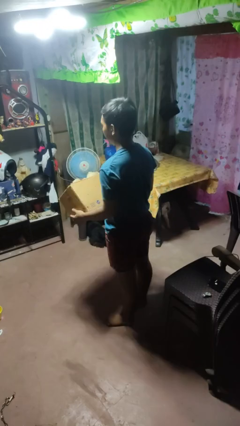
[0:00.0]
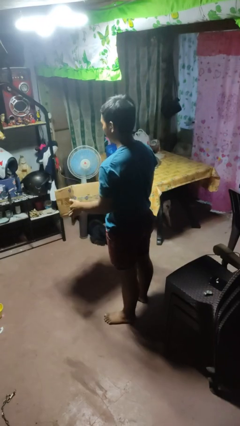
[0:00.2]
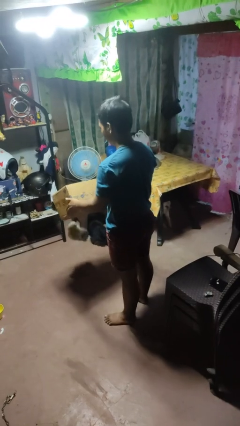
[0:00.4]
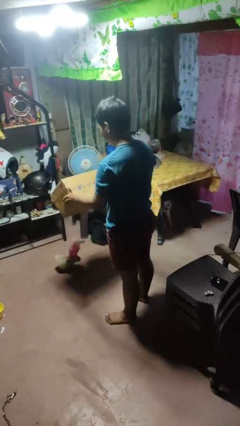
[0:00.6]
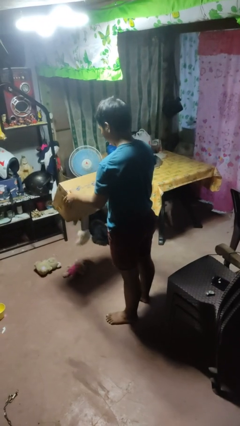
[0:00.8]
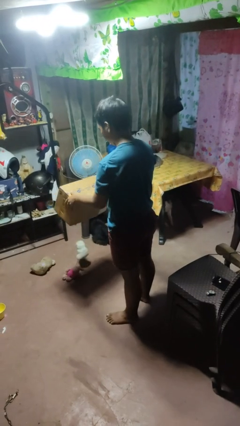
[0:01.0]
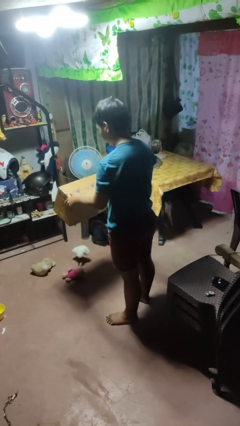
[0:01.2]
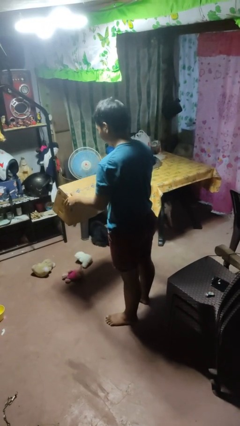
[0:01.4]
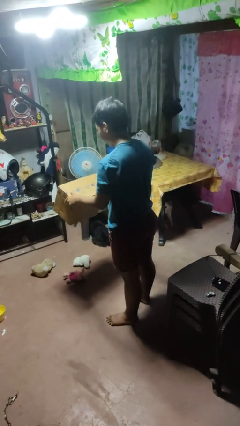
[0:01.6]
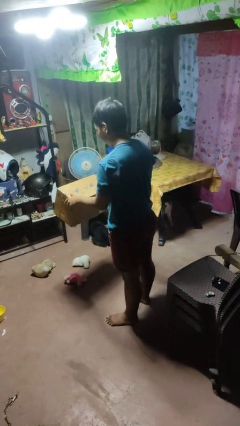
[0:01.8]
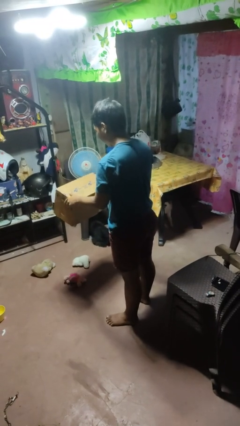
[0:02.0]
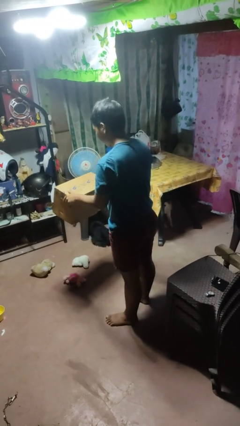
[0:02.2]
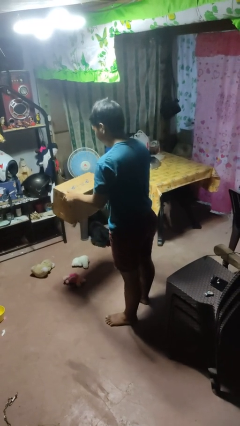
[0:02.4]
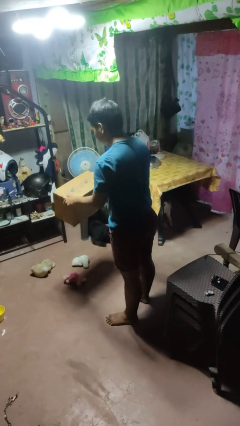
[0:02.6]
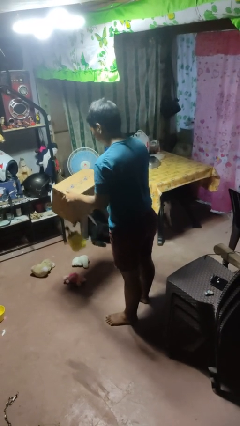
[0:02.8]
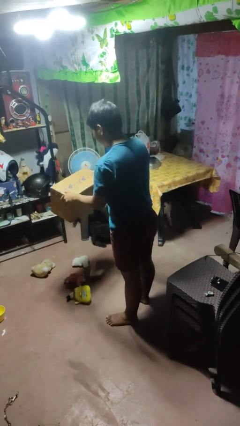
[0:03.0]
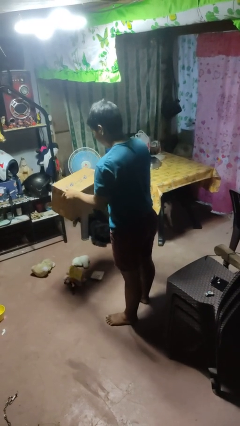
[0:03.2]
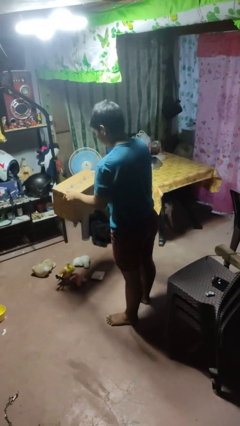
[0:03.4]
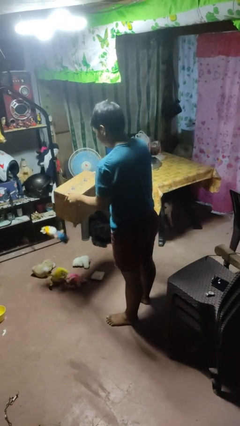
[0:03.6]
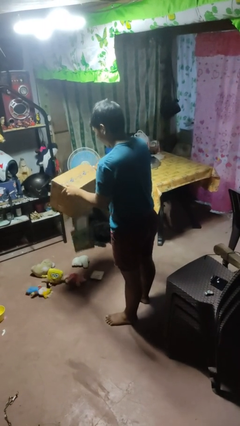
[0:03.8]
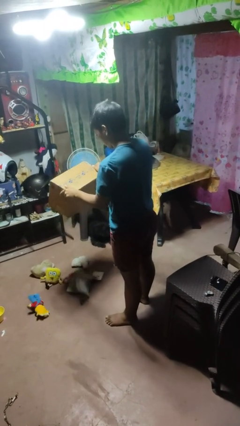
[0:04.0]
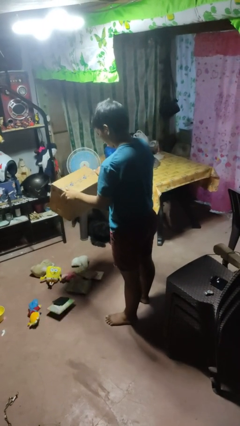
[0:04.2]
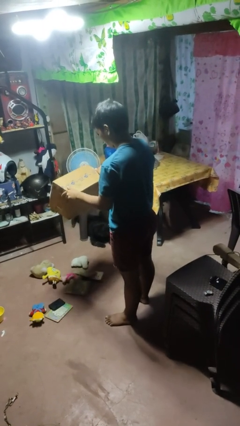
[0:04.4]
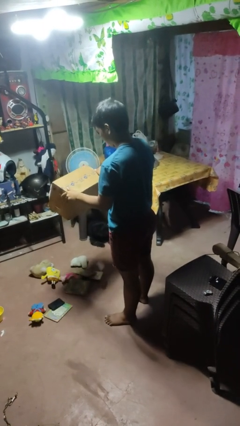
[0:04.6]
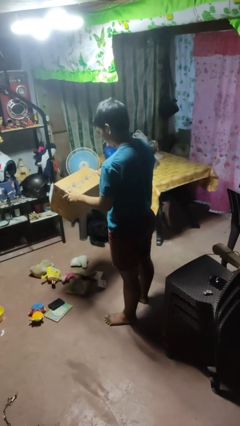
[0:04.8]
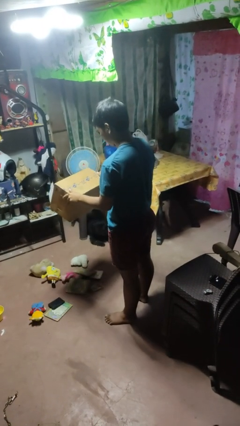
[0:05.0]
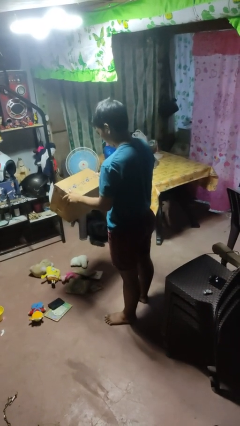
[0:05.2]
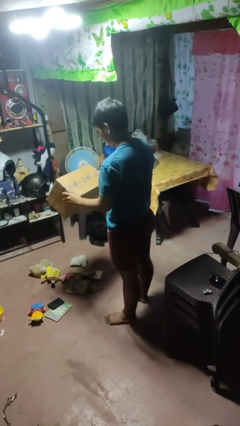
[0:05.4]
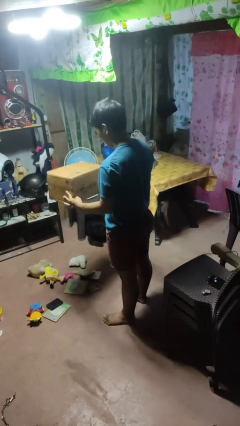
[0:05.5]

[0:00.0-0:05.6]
person unloads box onto floor

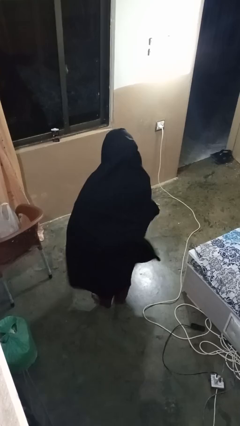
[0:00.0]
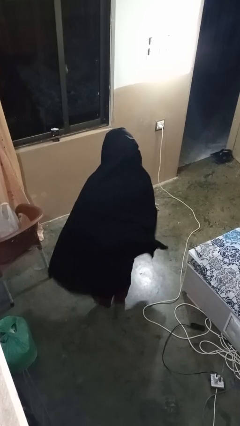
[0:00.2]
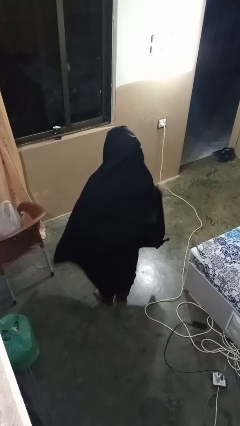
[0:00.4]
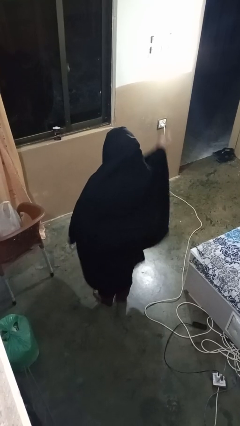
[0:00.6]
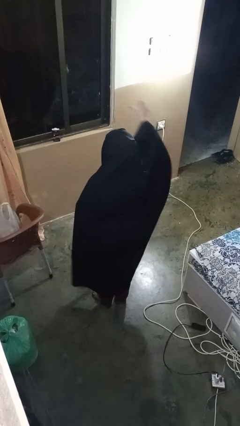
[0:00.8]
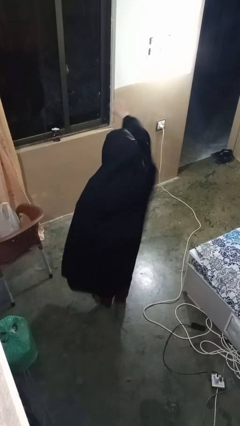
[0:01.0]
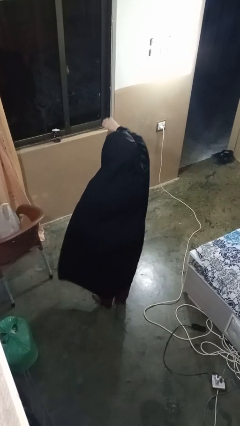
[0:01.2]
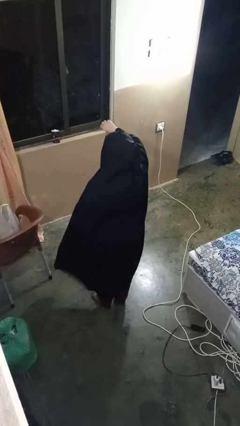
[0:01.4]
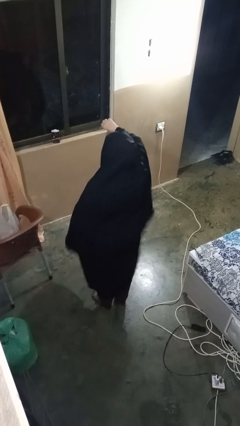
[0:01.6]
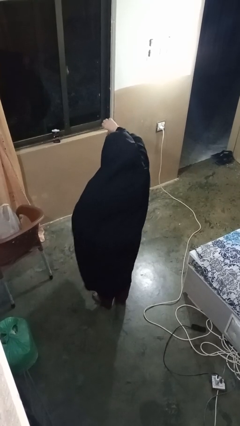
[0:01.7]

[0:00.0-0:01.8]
person gestures thumbs down

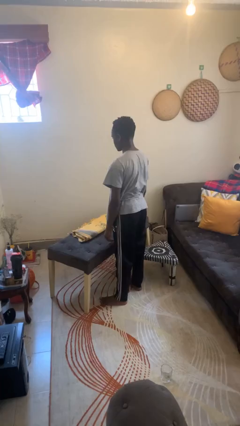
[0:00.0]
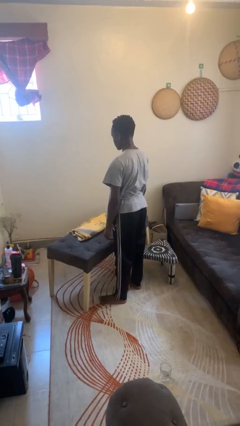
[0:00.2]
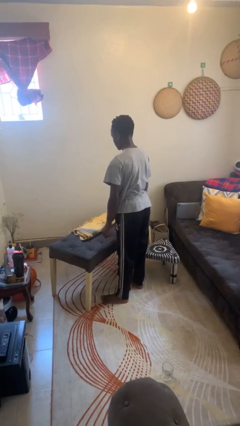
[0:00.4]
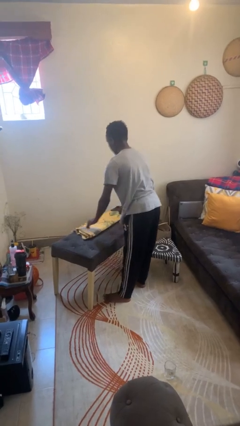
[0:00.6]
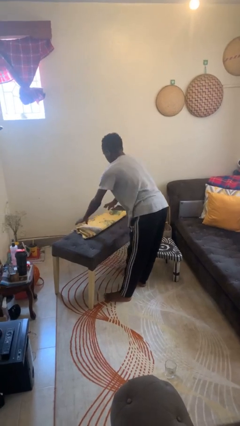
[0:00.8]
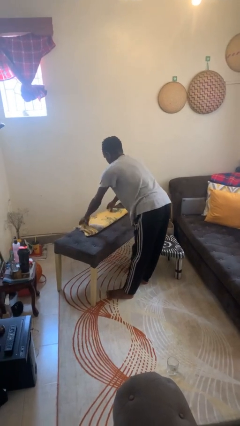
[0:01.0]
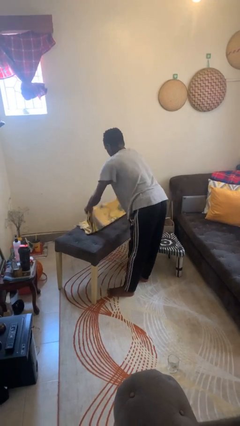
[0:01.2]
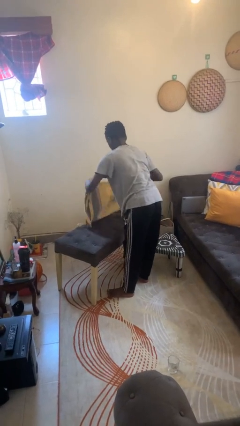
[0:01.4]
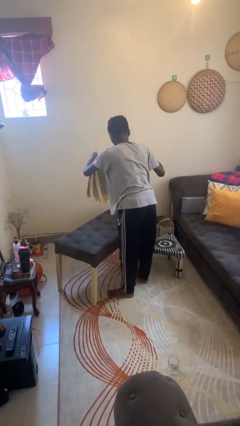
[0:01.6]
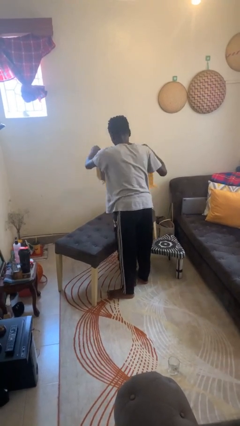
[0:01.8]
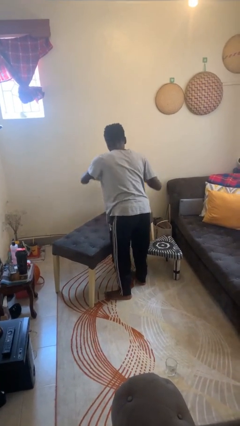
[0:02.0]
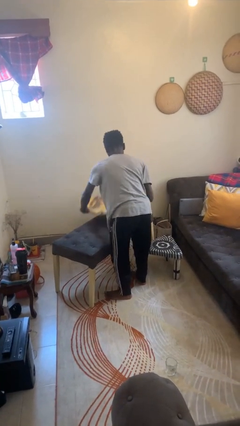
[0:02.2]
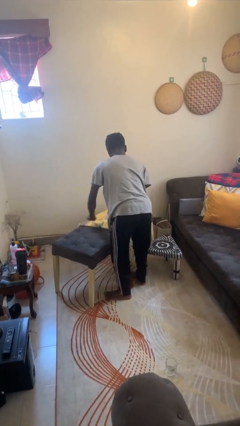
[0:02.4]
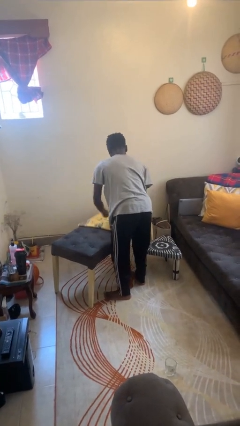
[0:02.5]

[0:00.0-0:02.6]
person spreads tablecloth

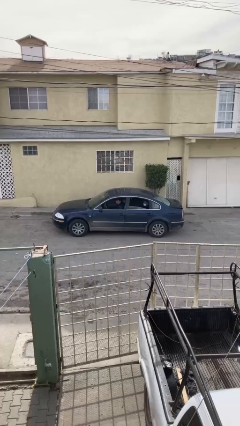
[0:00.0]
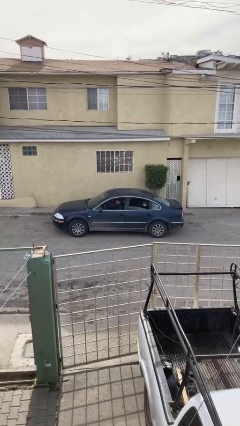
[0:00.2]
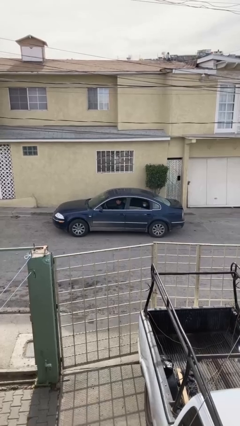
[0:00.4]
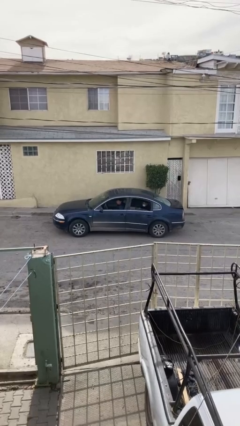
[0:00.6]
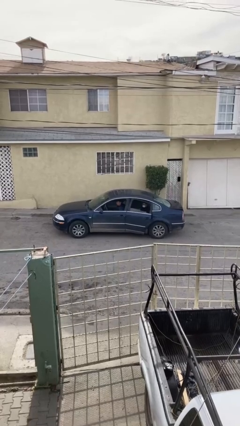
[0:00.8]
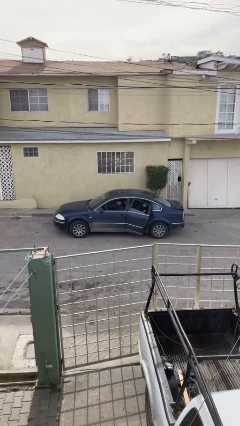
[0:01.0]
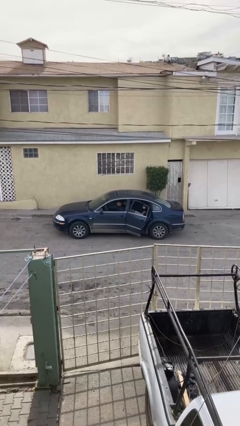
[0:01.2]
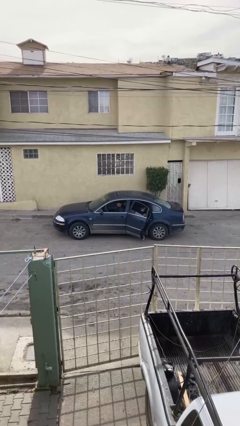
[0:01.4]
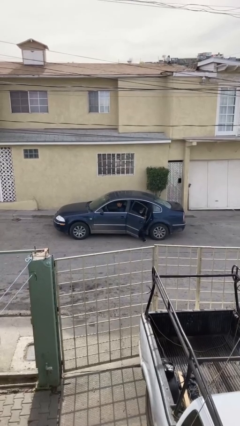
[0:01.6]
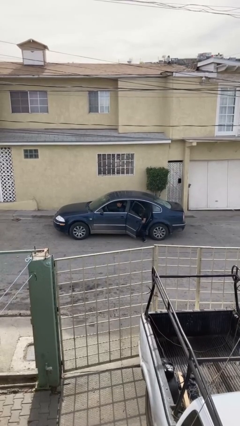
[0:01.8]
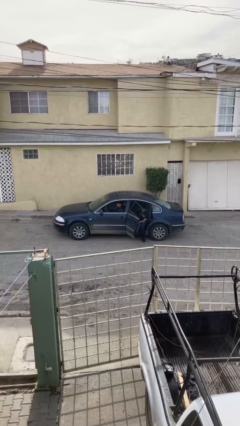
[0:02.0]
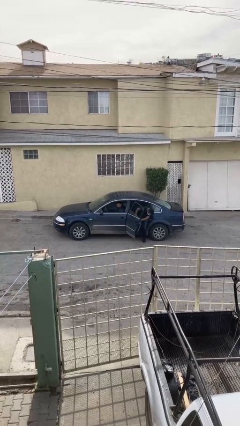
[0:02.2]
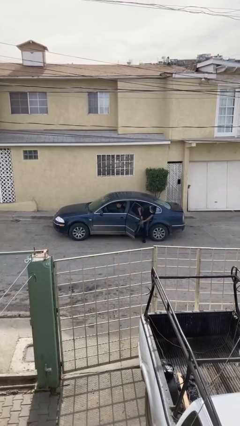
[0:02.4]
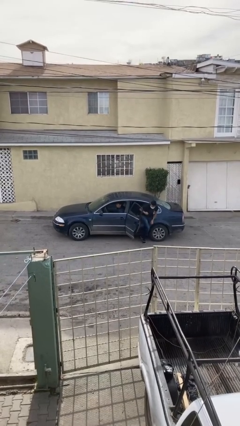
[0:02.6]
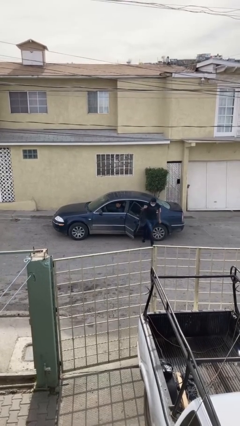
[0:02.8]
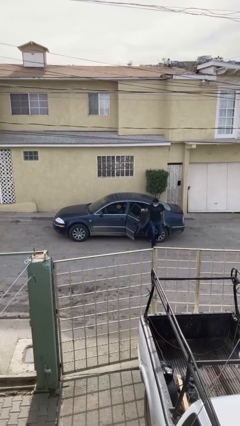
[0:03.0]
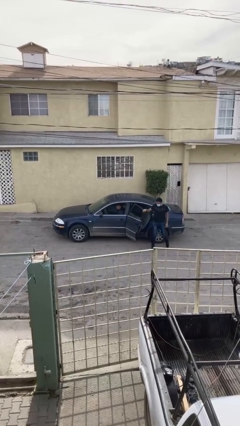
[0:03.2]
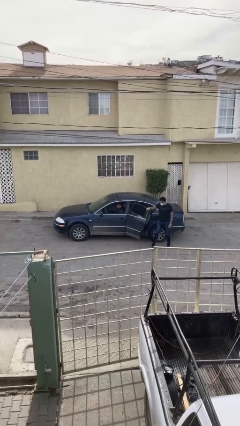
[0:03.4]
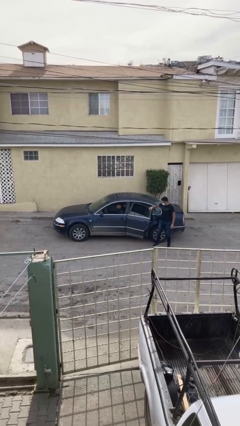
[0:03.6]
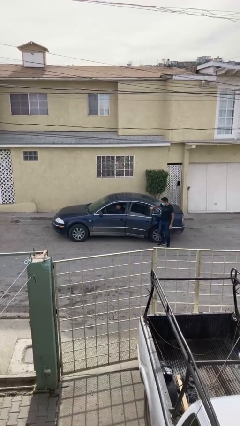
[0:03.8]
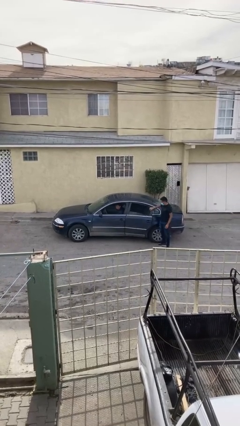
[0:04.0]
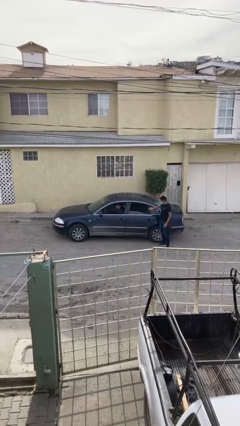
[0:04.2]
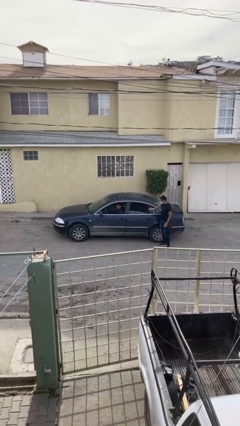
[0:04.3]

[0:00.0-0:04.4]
car drops off person

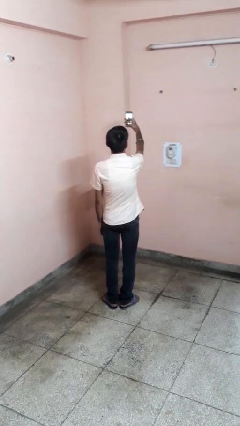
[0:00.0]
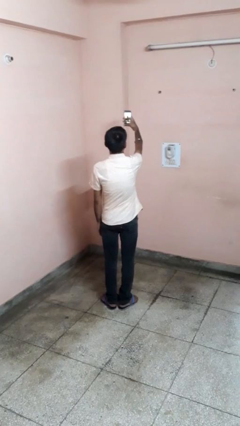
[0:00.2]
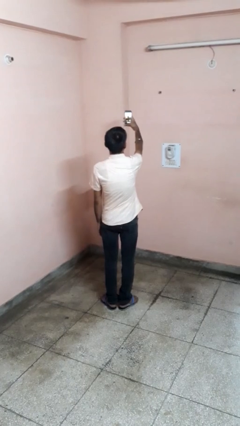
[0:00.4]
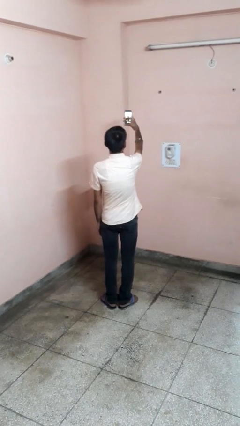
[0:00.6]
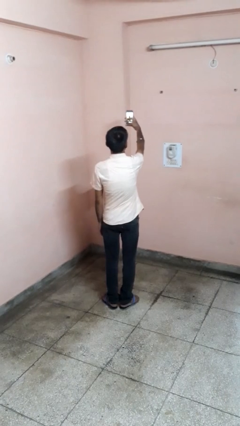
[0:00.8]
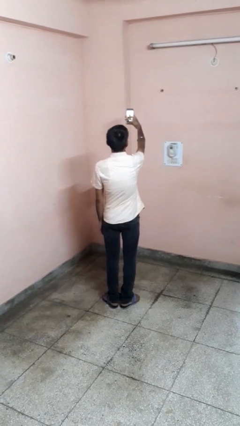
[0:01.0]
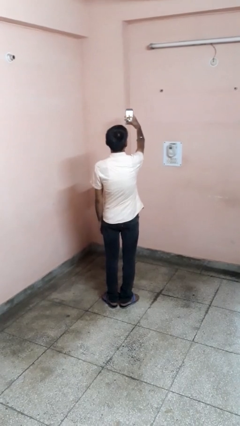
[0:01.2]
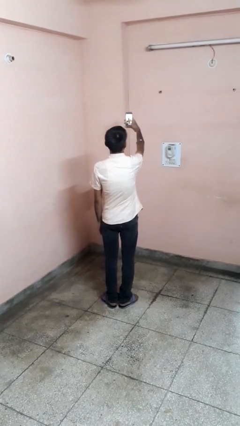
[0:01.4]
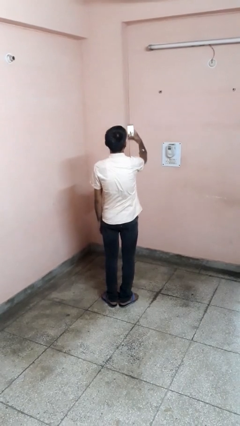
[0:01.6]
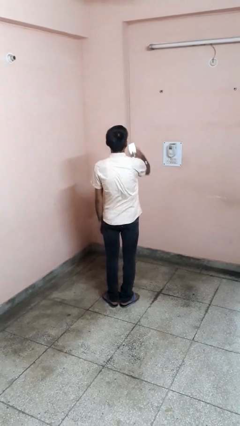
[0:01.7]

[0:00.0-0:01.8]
person takes selfie

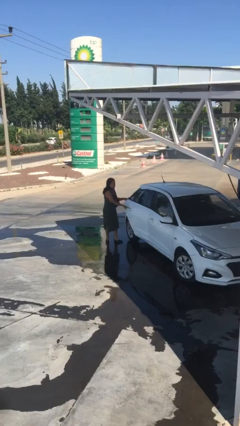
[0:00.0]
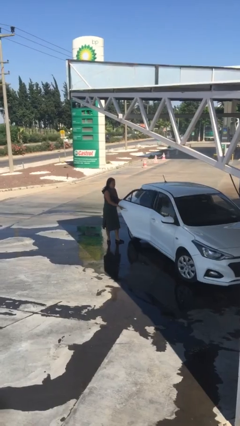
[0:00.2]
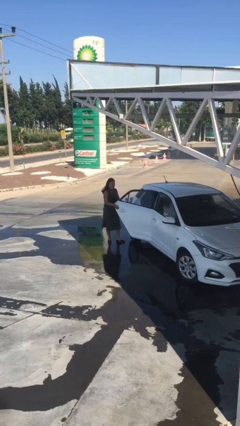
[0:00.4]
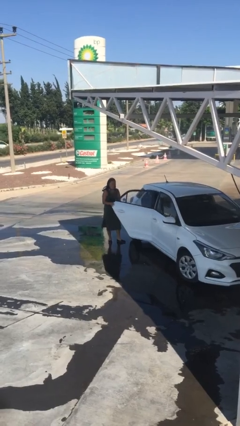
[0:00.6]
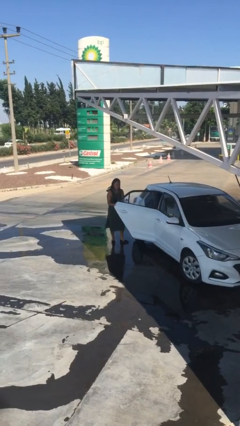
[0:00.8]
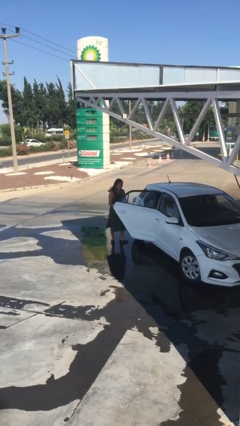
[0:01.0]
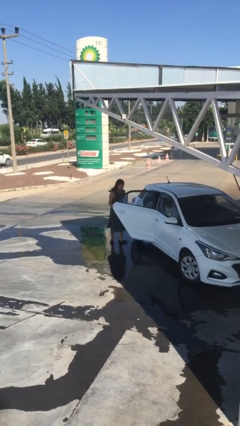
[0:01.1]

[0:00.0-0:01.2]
person opens car door

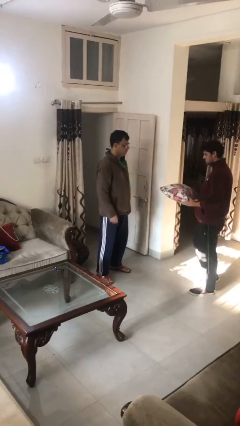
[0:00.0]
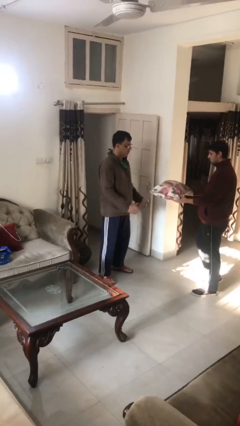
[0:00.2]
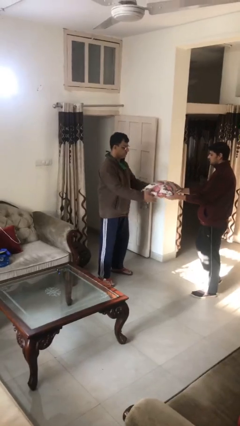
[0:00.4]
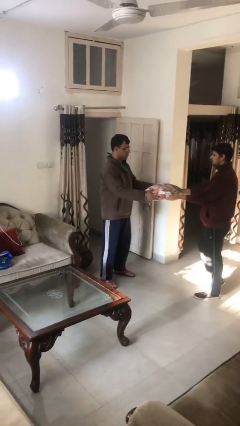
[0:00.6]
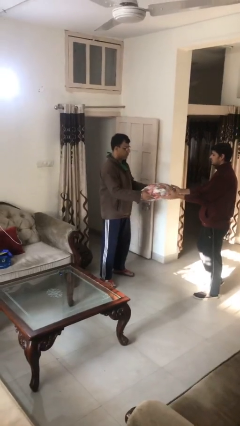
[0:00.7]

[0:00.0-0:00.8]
person transfers object to person
